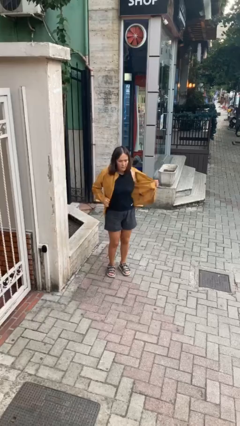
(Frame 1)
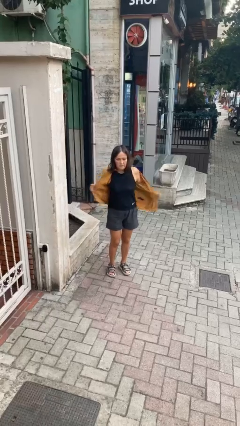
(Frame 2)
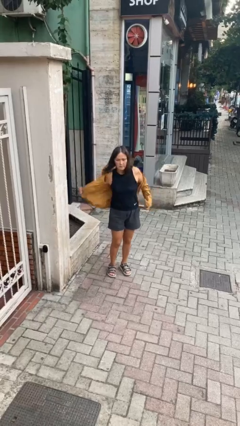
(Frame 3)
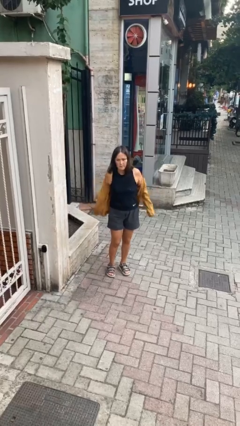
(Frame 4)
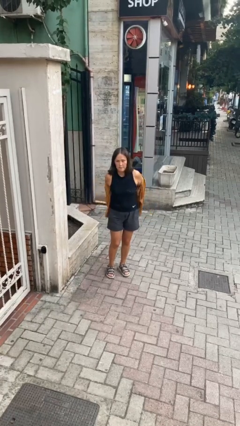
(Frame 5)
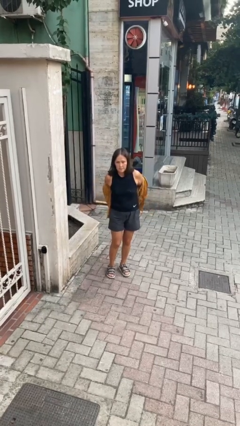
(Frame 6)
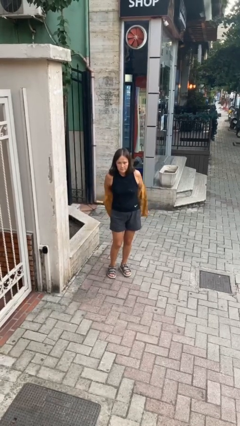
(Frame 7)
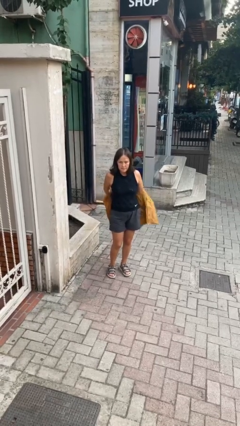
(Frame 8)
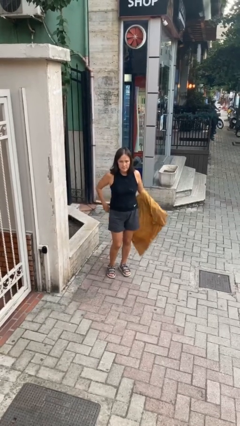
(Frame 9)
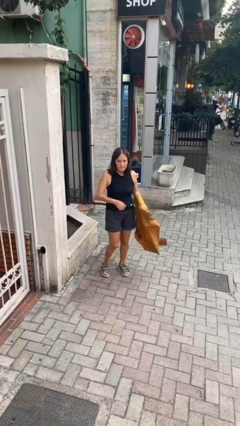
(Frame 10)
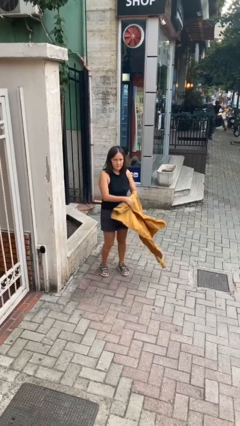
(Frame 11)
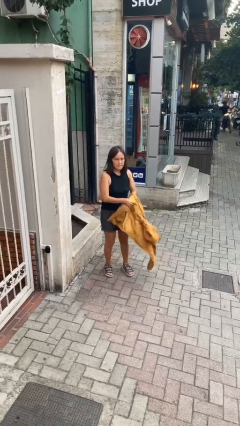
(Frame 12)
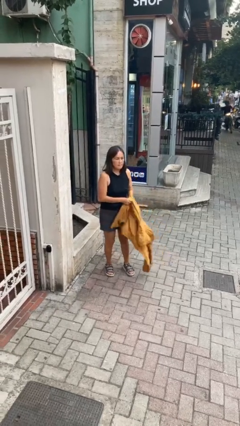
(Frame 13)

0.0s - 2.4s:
person takes off jacket

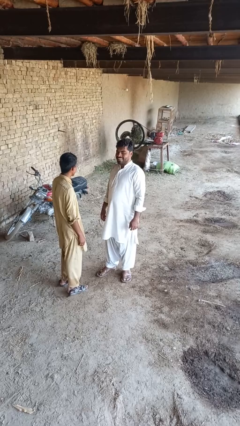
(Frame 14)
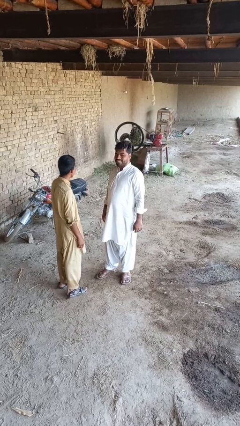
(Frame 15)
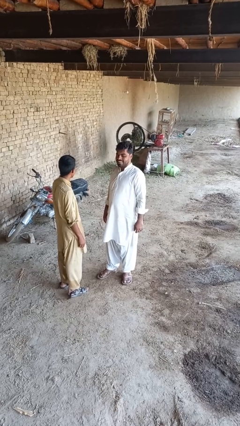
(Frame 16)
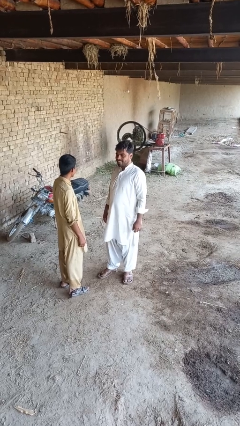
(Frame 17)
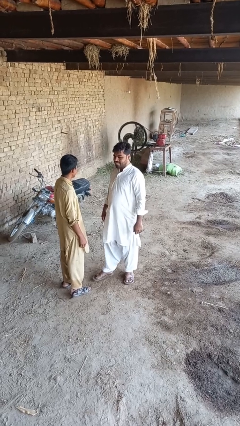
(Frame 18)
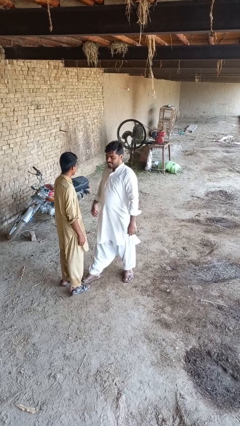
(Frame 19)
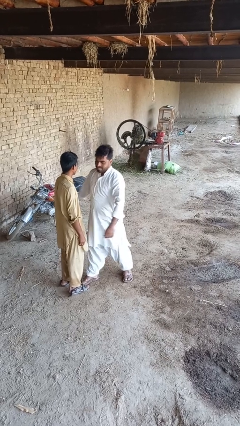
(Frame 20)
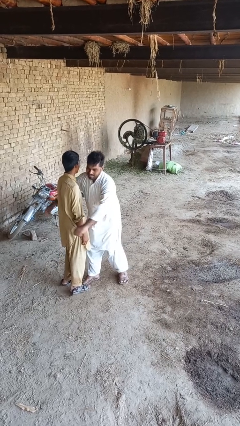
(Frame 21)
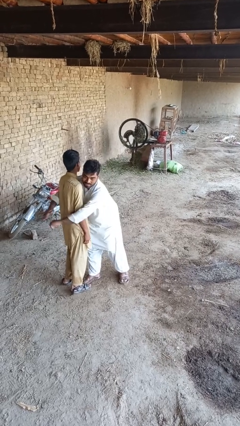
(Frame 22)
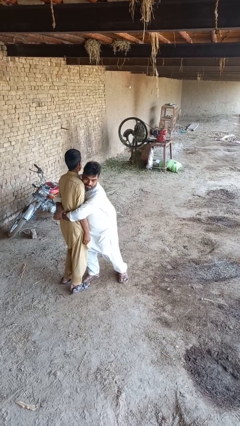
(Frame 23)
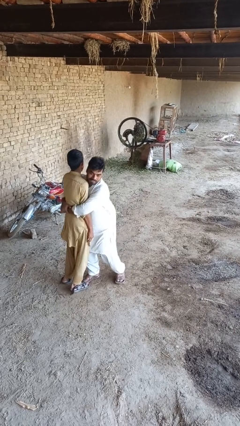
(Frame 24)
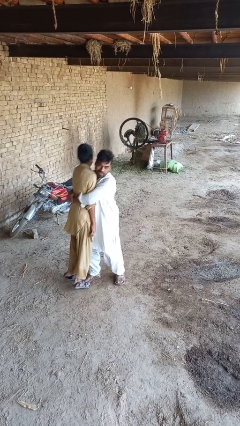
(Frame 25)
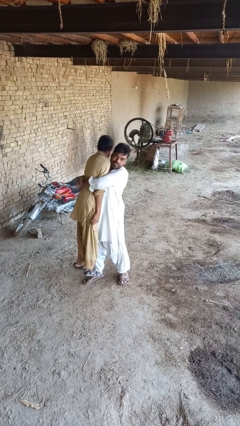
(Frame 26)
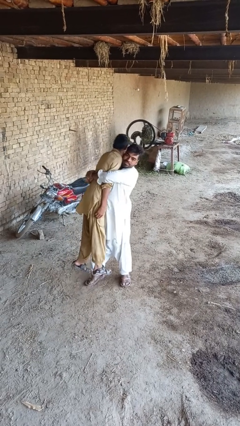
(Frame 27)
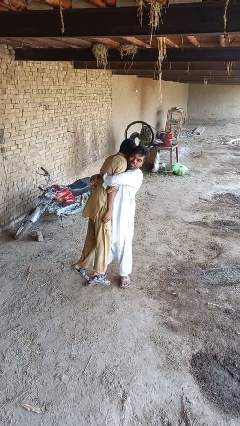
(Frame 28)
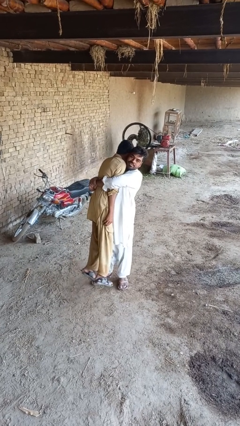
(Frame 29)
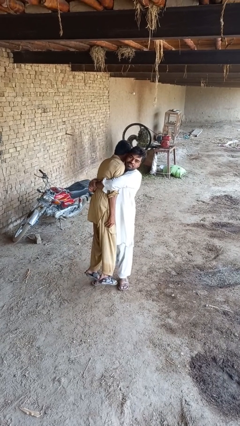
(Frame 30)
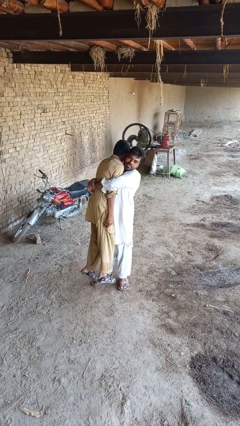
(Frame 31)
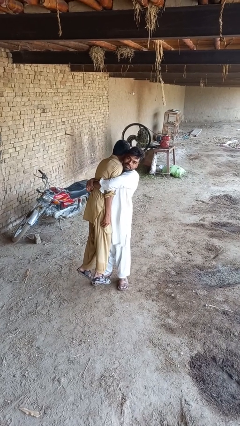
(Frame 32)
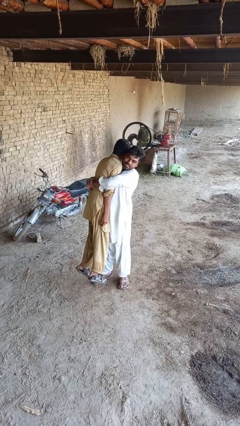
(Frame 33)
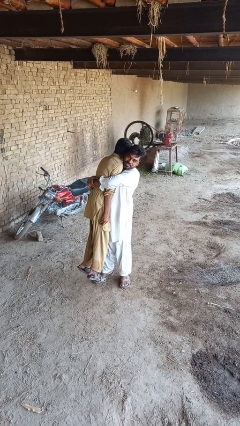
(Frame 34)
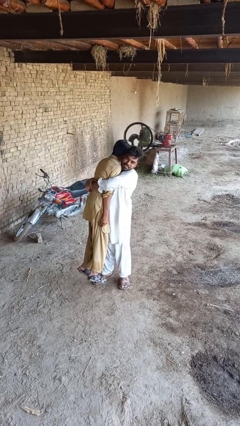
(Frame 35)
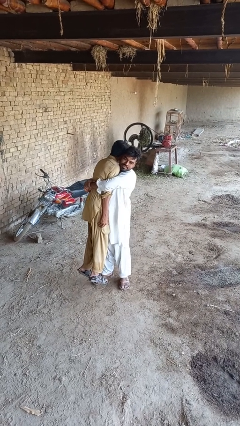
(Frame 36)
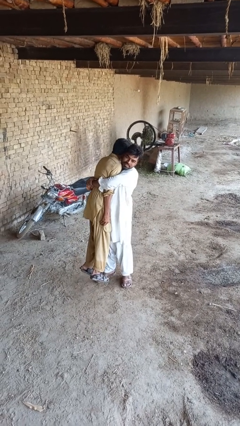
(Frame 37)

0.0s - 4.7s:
person picks up person

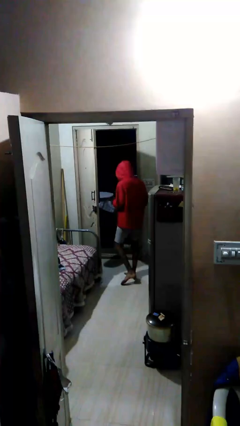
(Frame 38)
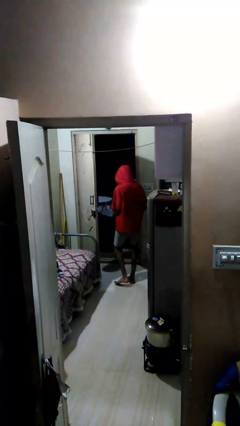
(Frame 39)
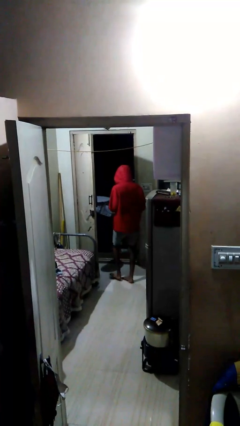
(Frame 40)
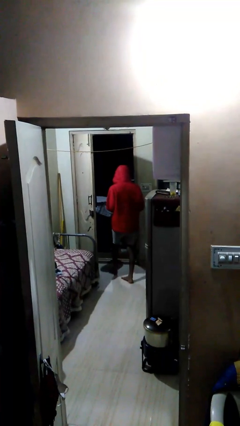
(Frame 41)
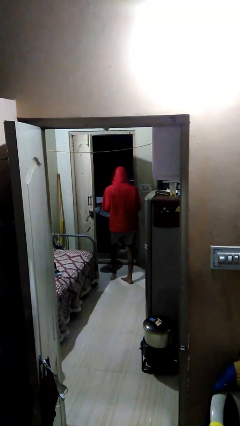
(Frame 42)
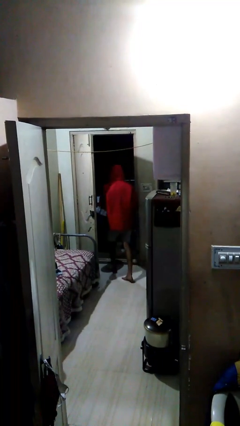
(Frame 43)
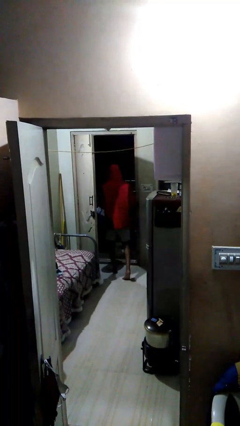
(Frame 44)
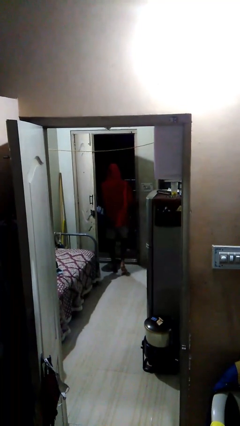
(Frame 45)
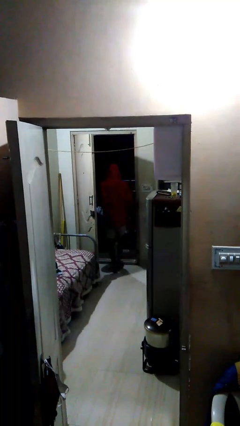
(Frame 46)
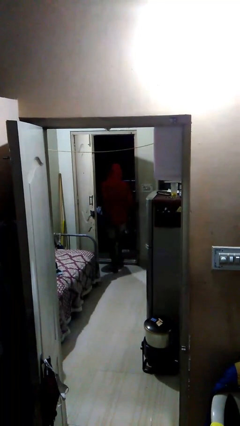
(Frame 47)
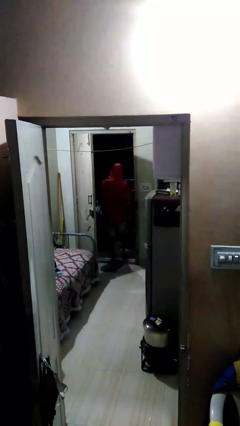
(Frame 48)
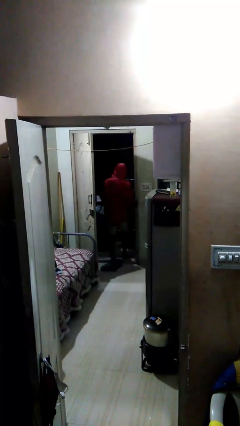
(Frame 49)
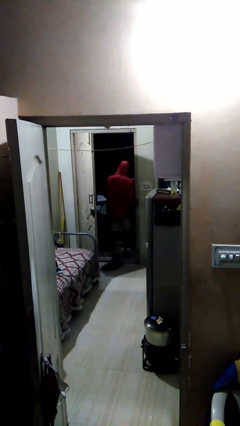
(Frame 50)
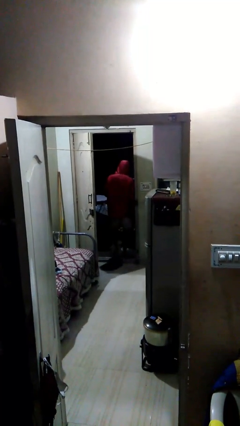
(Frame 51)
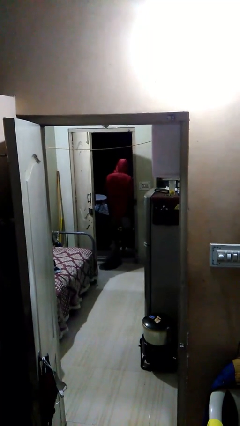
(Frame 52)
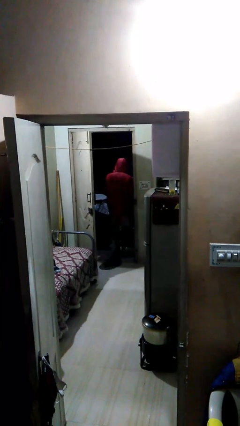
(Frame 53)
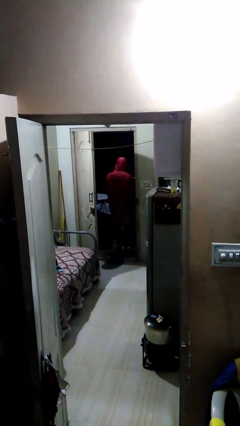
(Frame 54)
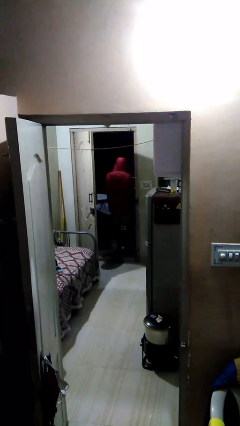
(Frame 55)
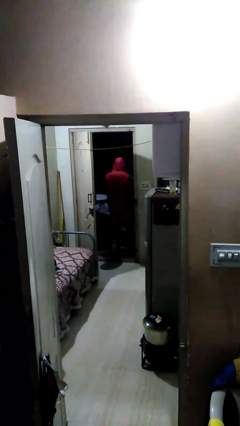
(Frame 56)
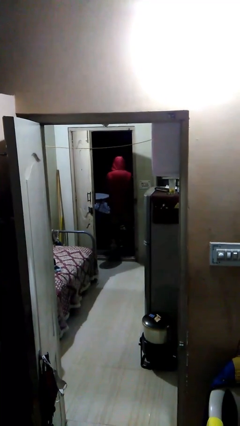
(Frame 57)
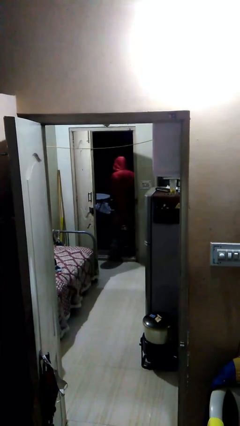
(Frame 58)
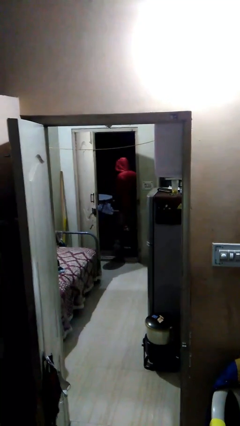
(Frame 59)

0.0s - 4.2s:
person exits scene through structure

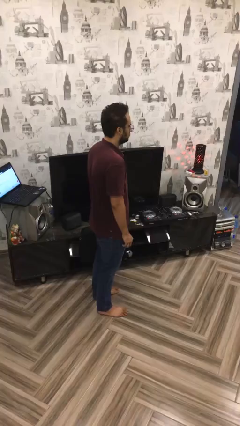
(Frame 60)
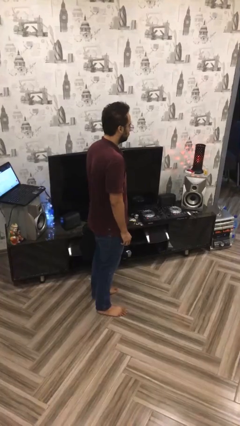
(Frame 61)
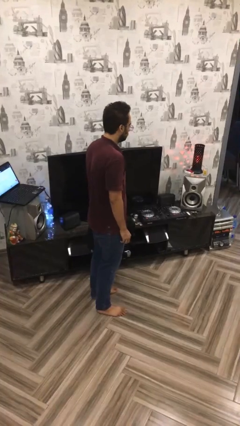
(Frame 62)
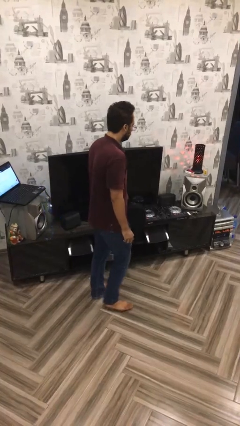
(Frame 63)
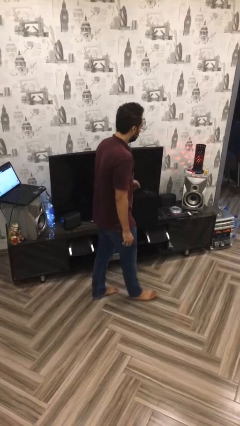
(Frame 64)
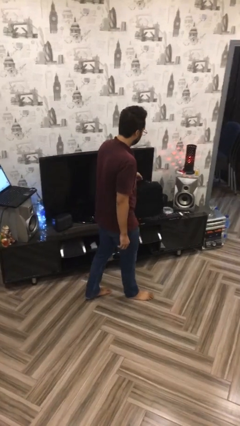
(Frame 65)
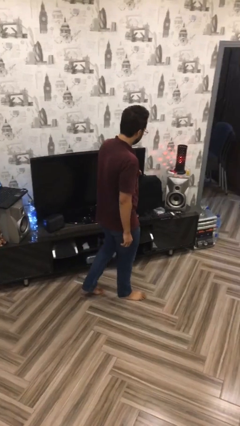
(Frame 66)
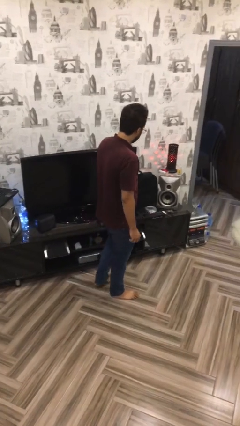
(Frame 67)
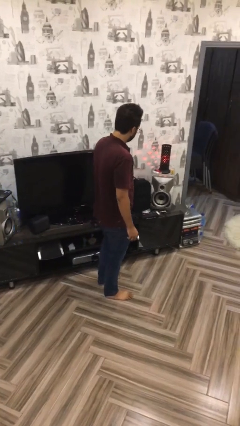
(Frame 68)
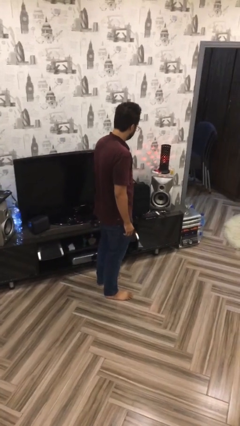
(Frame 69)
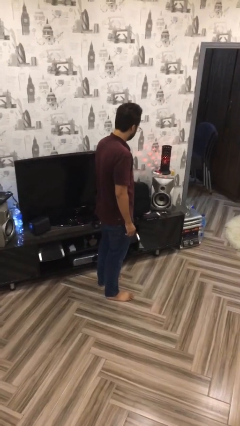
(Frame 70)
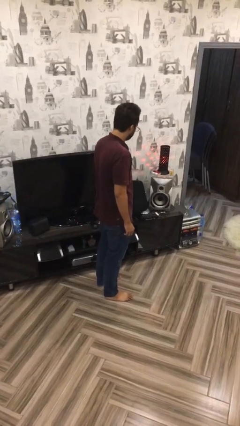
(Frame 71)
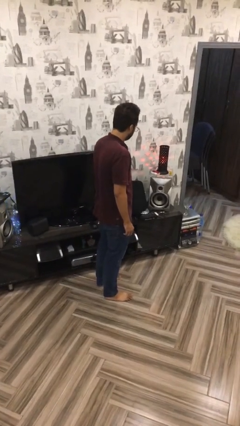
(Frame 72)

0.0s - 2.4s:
person puts down object on table

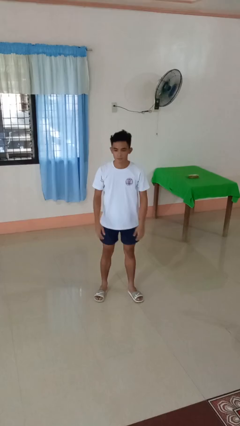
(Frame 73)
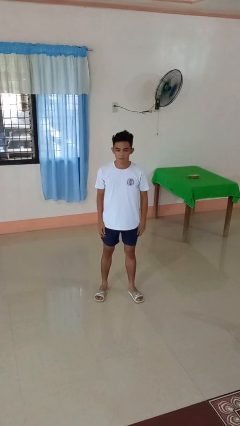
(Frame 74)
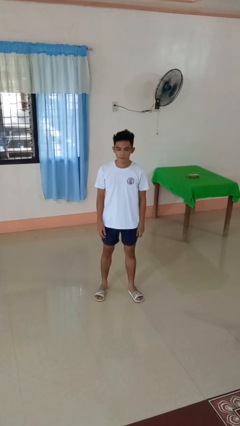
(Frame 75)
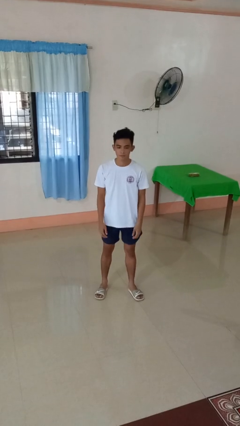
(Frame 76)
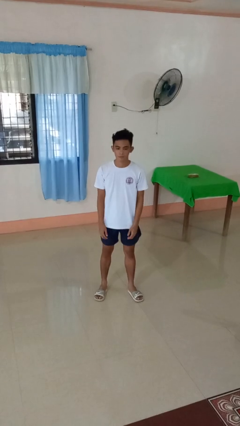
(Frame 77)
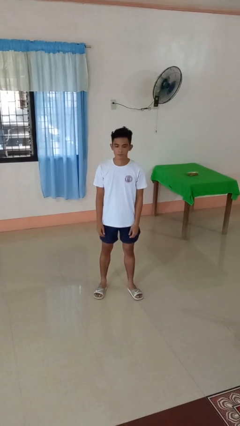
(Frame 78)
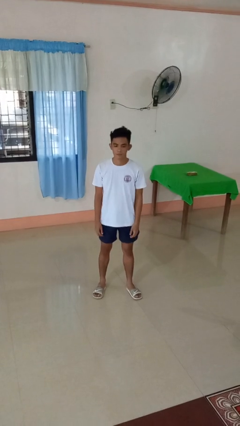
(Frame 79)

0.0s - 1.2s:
person stands up

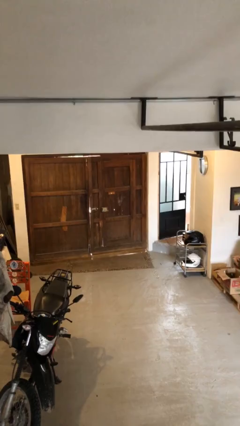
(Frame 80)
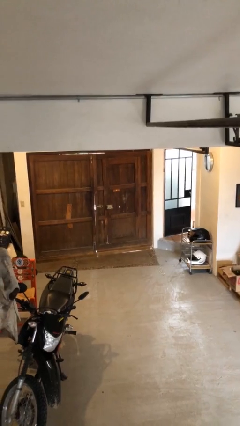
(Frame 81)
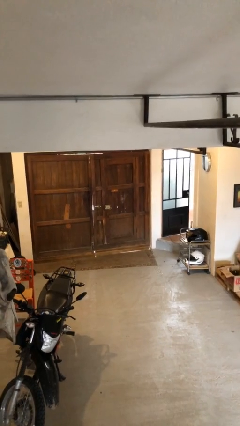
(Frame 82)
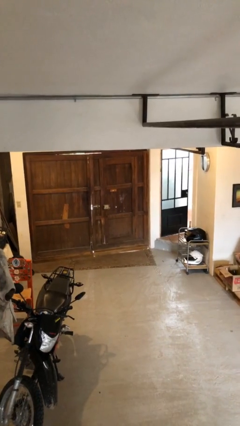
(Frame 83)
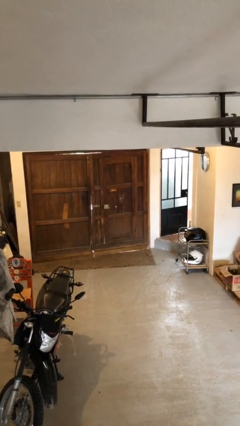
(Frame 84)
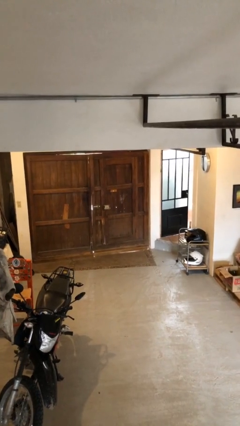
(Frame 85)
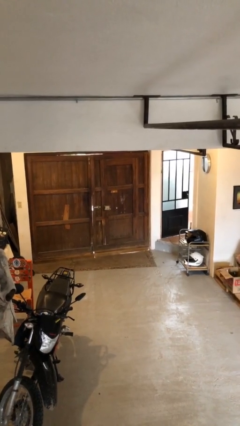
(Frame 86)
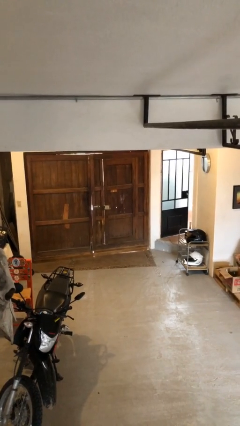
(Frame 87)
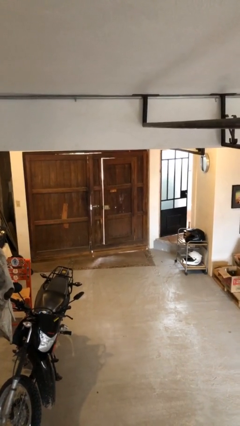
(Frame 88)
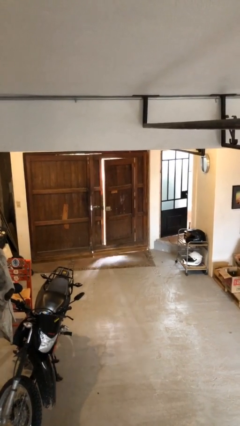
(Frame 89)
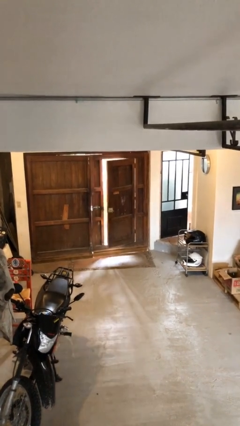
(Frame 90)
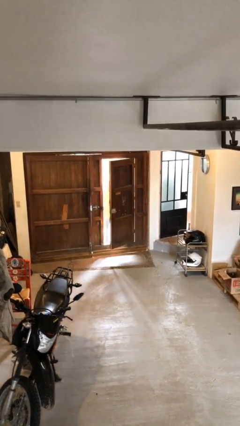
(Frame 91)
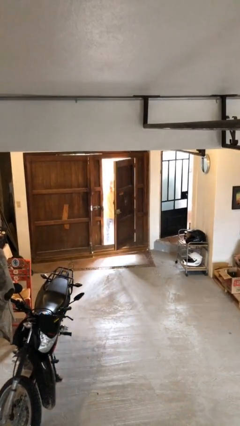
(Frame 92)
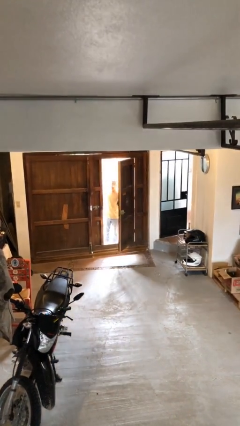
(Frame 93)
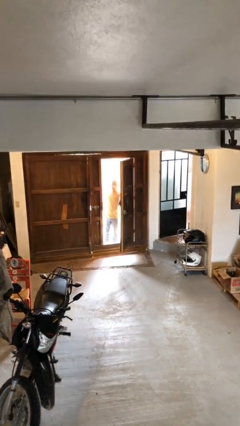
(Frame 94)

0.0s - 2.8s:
person opens facility door
